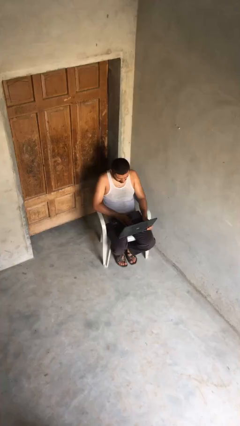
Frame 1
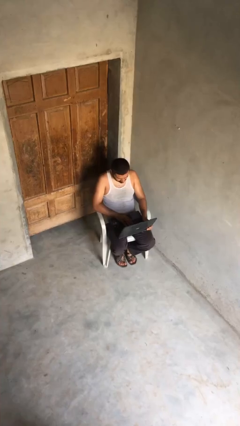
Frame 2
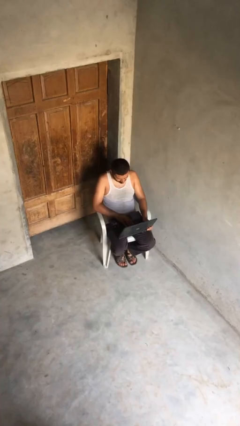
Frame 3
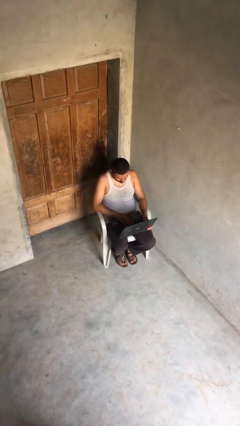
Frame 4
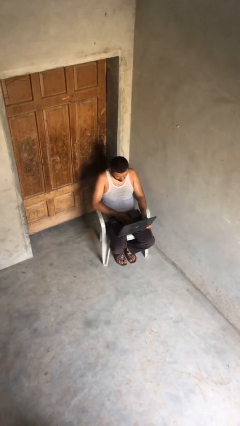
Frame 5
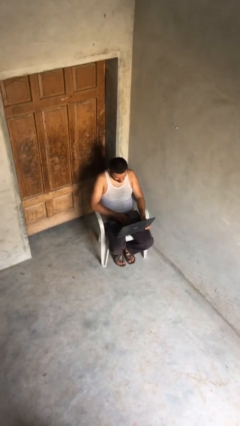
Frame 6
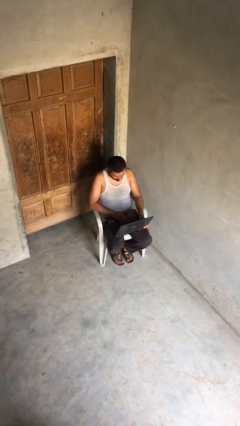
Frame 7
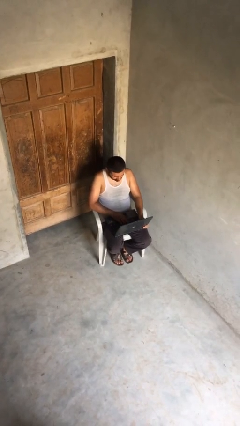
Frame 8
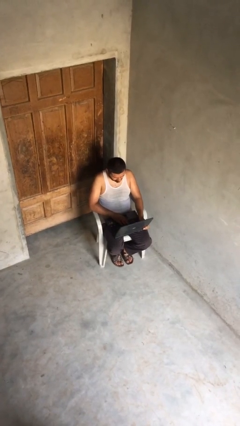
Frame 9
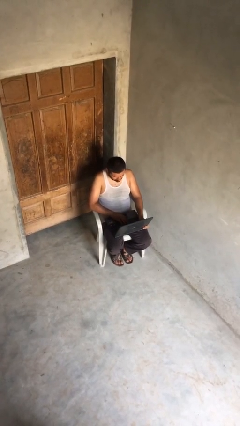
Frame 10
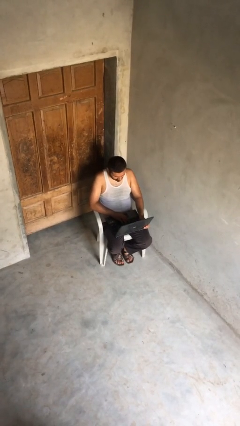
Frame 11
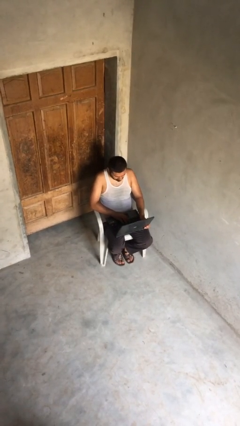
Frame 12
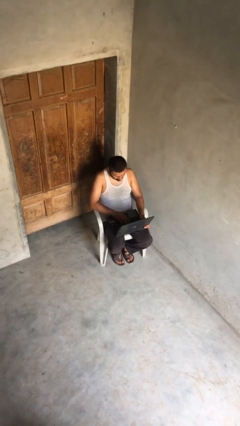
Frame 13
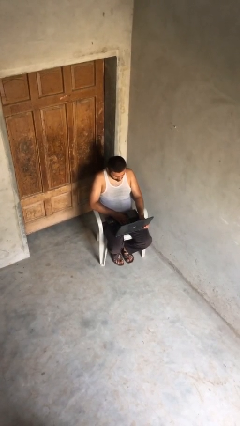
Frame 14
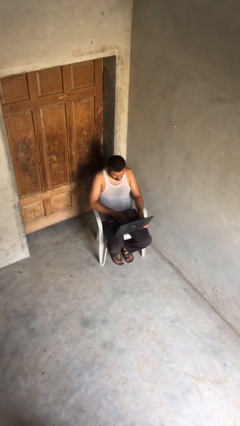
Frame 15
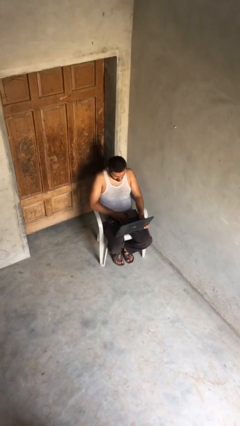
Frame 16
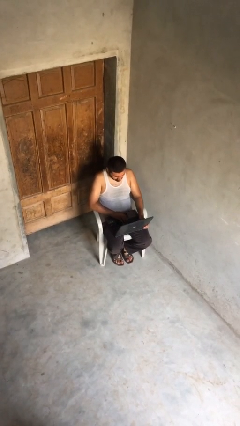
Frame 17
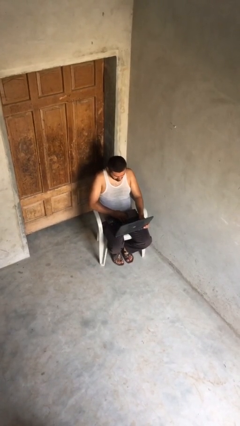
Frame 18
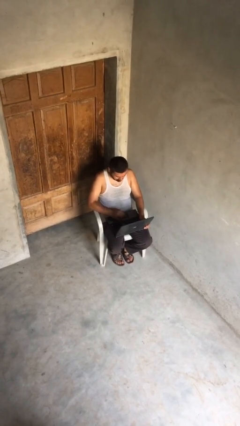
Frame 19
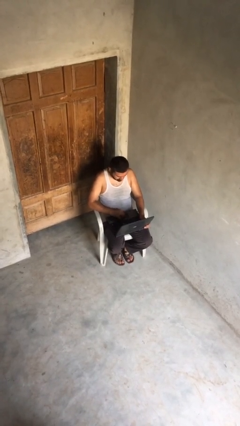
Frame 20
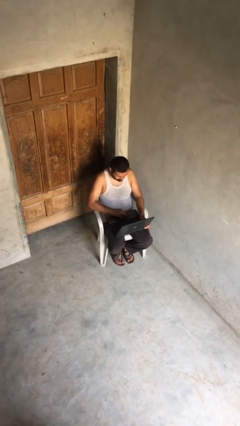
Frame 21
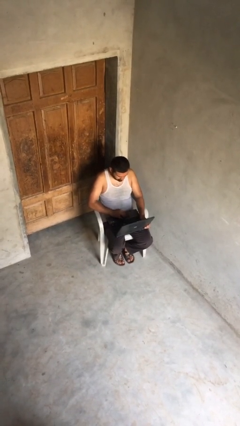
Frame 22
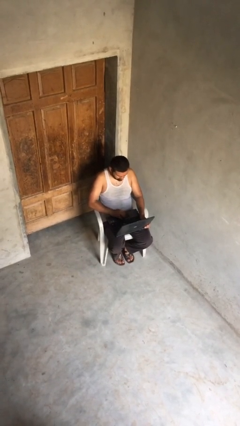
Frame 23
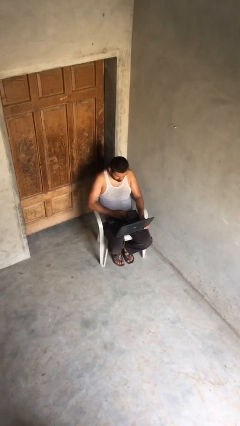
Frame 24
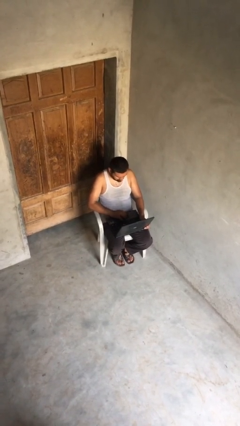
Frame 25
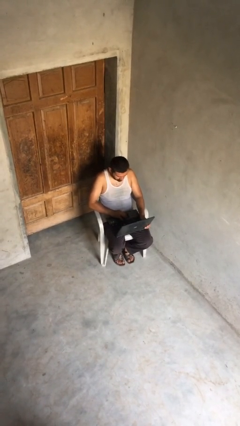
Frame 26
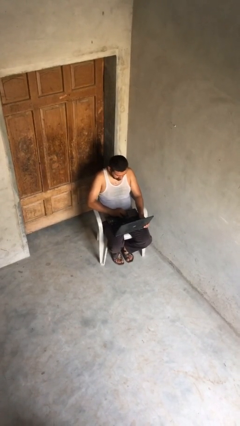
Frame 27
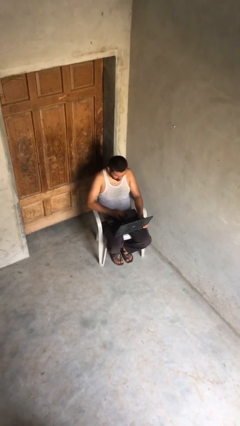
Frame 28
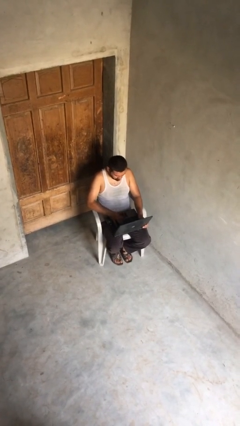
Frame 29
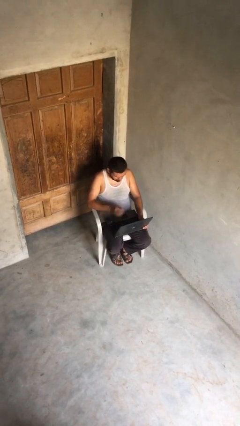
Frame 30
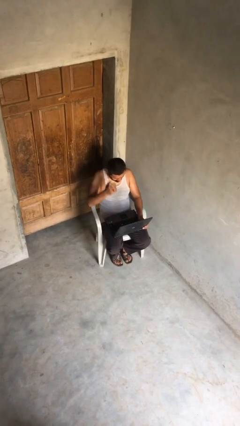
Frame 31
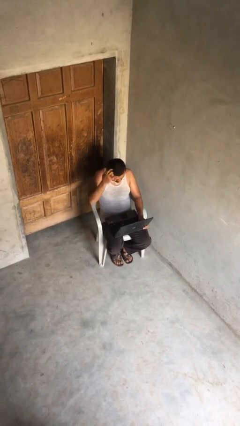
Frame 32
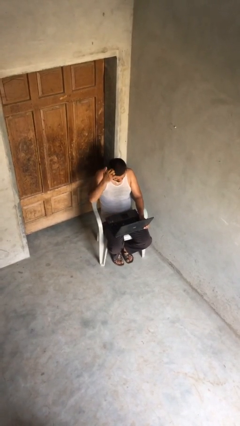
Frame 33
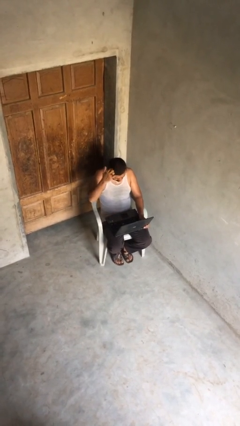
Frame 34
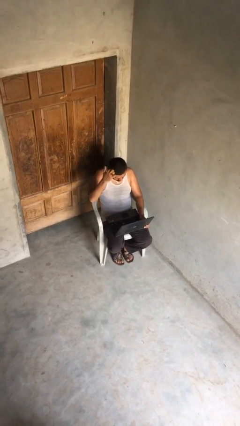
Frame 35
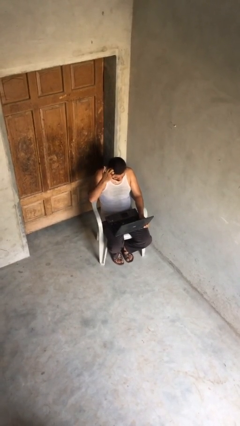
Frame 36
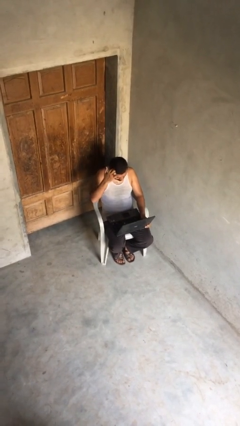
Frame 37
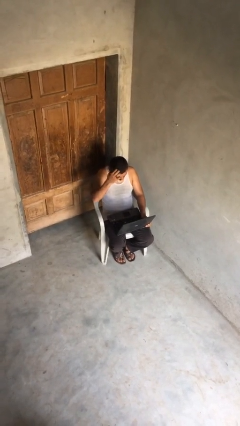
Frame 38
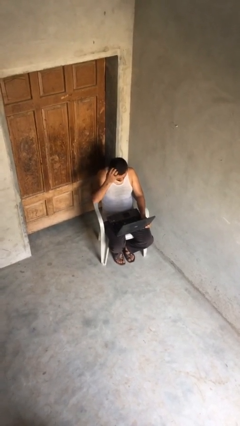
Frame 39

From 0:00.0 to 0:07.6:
person interacts with laptop

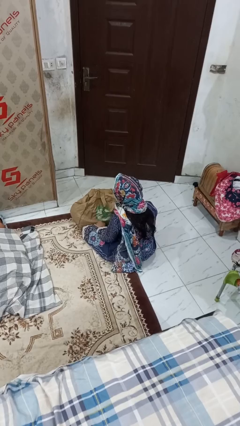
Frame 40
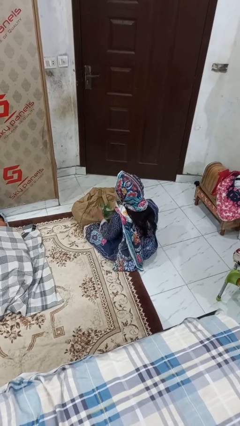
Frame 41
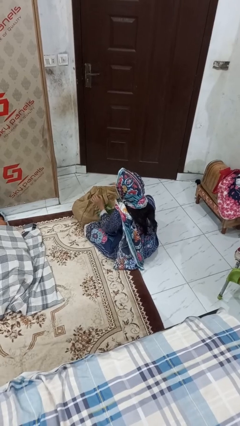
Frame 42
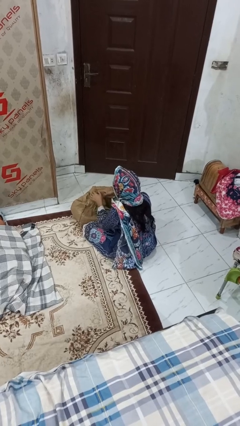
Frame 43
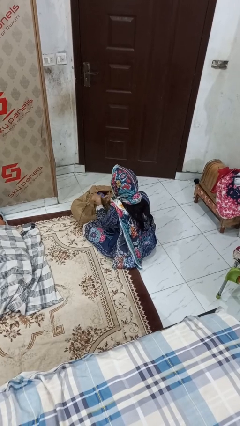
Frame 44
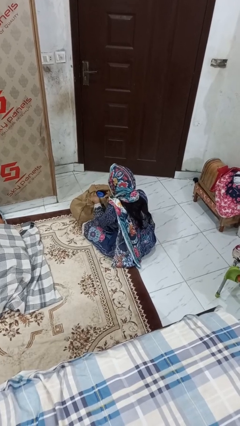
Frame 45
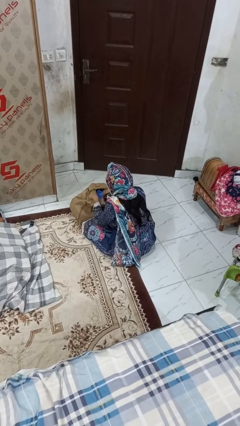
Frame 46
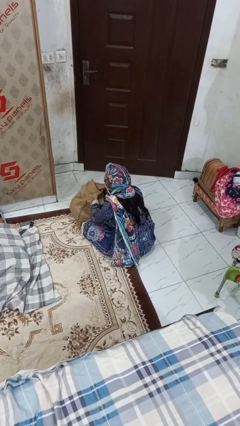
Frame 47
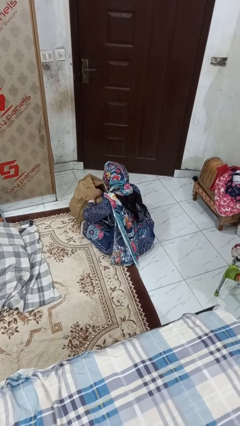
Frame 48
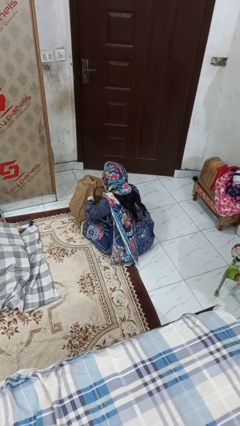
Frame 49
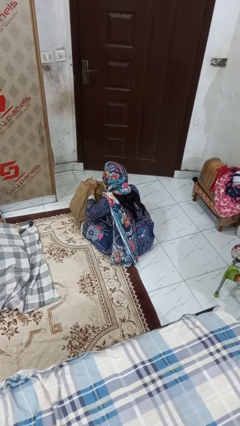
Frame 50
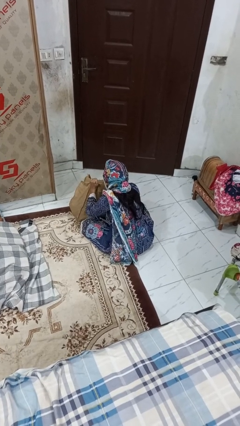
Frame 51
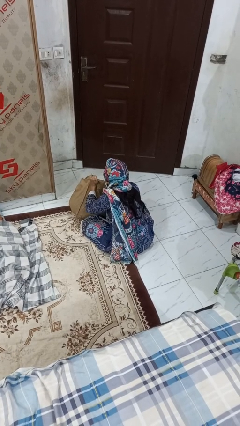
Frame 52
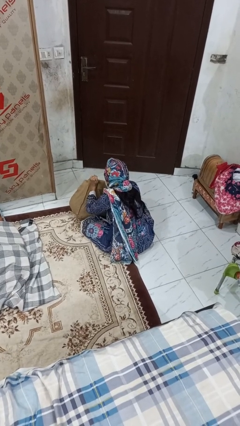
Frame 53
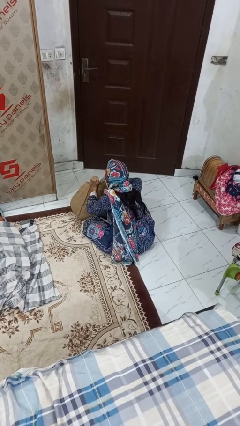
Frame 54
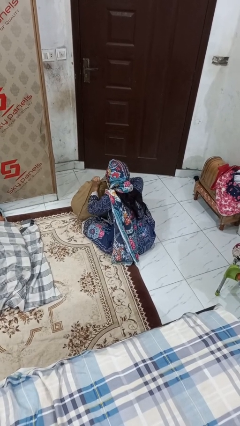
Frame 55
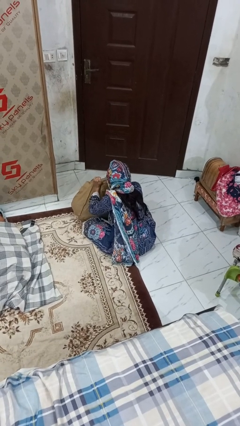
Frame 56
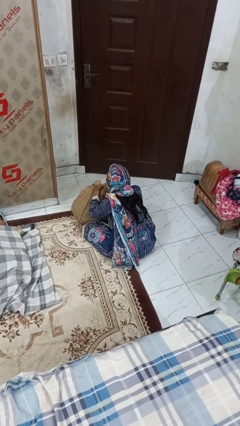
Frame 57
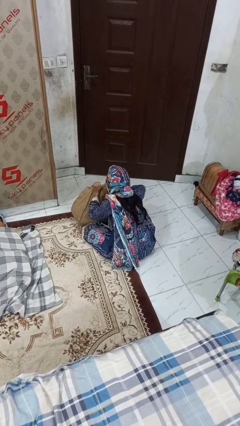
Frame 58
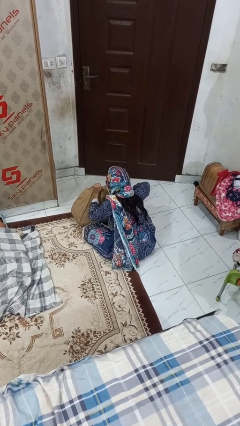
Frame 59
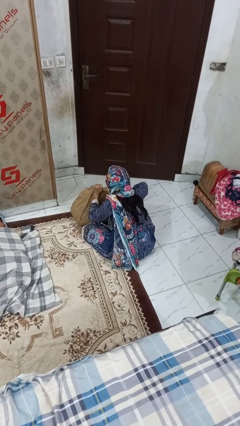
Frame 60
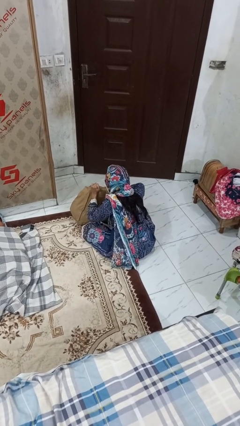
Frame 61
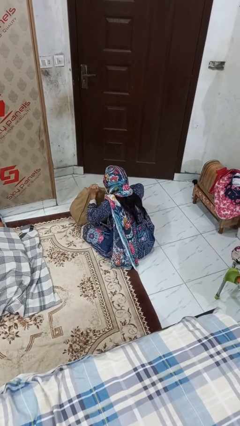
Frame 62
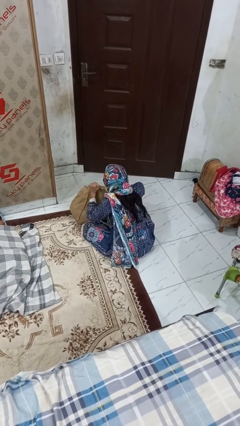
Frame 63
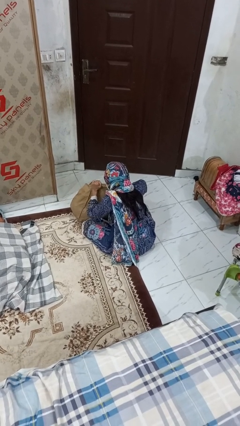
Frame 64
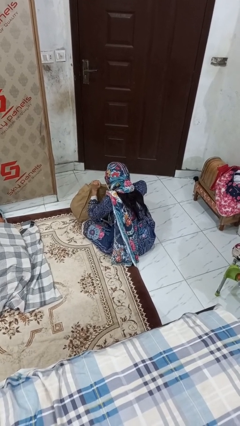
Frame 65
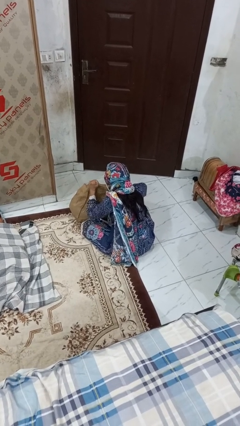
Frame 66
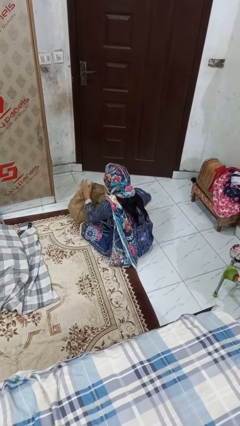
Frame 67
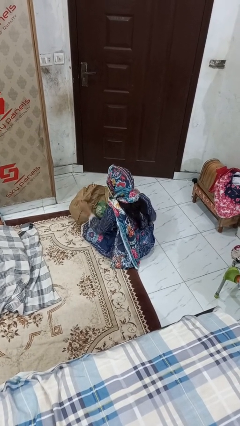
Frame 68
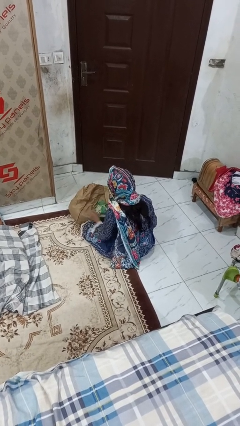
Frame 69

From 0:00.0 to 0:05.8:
person searches in bag

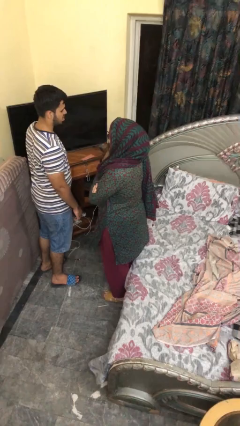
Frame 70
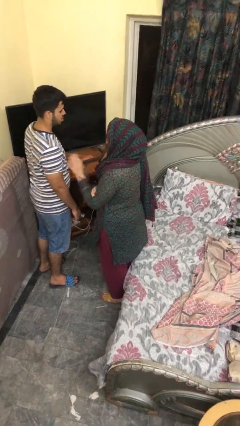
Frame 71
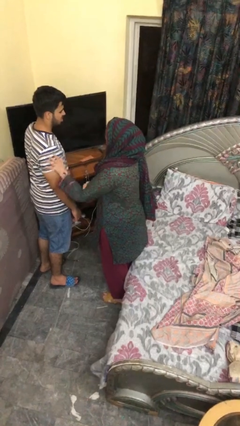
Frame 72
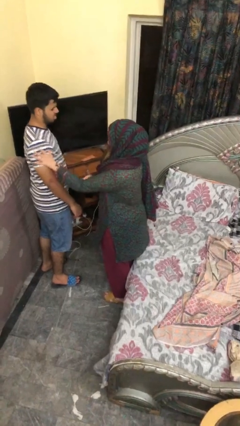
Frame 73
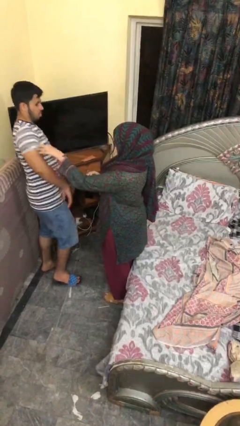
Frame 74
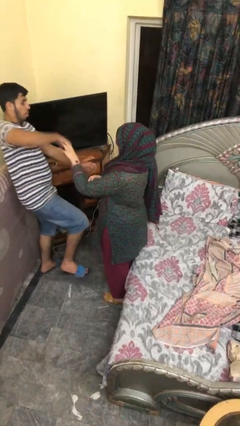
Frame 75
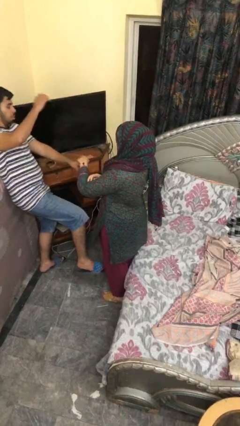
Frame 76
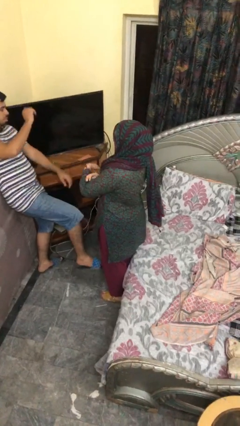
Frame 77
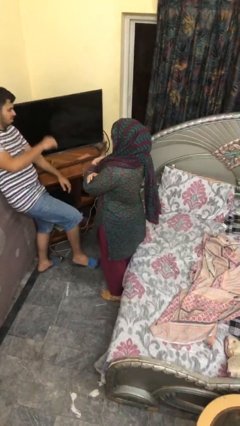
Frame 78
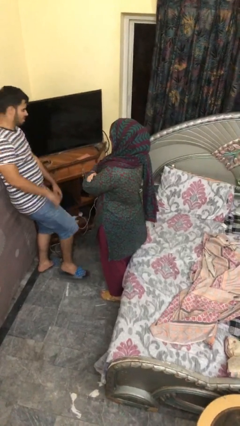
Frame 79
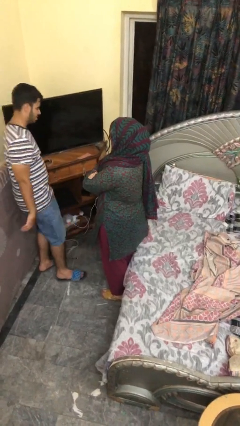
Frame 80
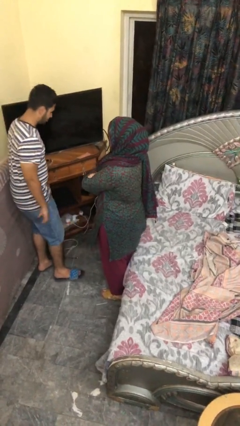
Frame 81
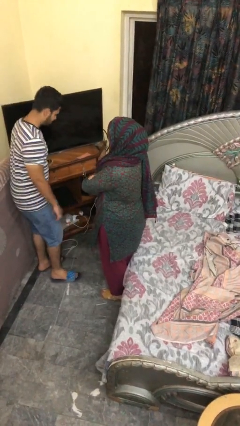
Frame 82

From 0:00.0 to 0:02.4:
person shoves person

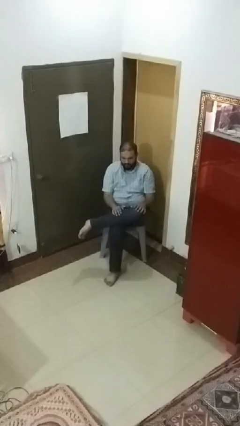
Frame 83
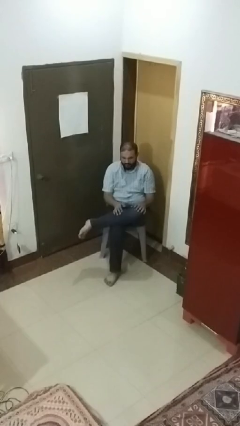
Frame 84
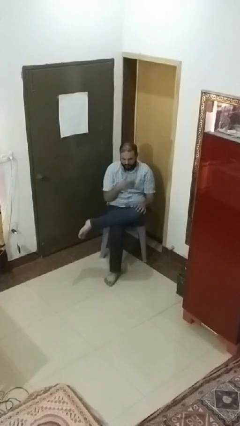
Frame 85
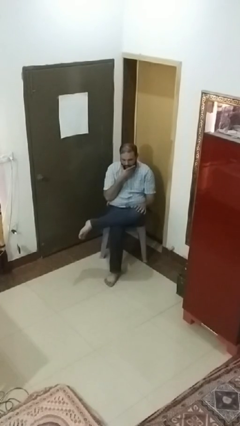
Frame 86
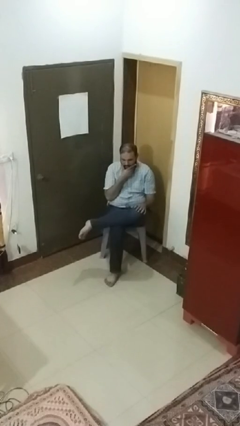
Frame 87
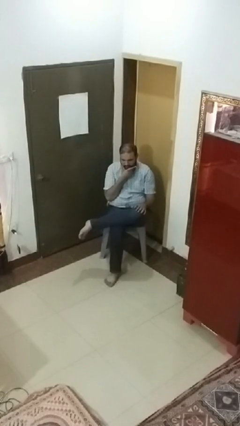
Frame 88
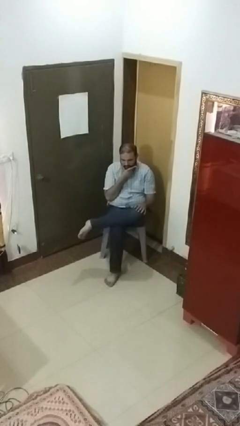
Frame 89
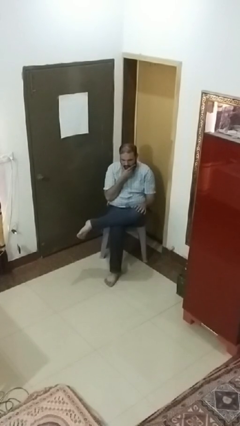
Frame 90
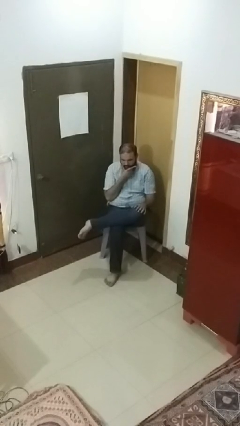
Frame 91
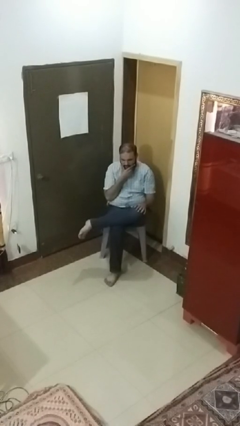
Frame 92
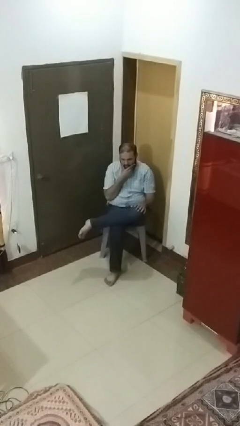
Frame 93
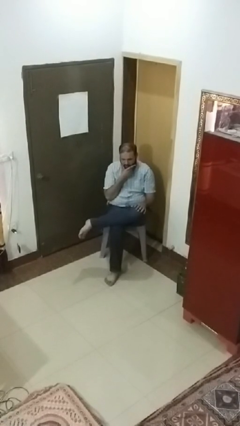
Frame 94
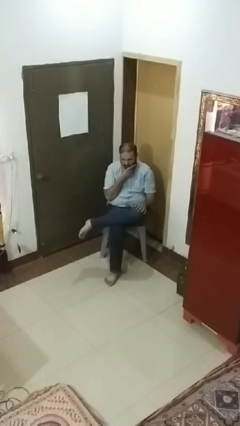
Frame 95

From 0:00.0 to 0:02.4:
person strokes chin
